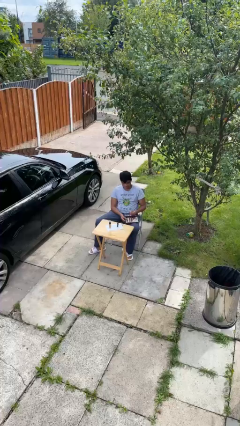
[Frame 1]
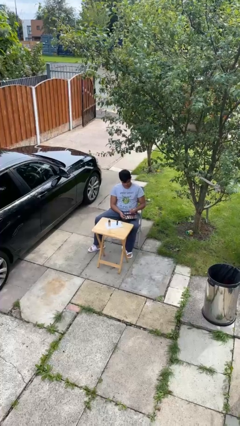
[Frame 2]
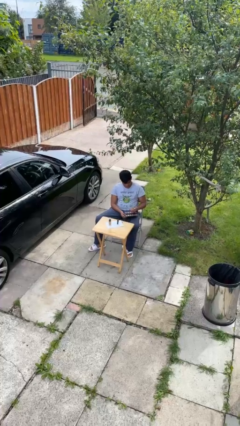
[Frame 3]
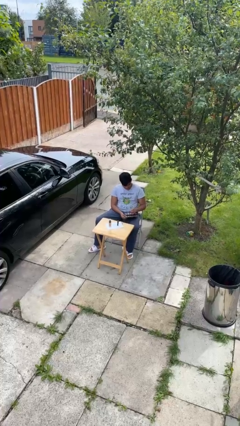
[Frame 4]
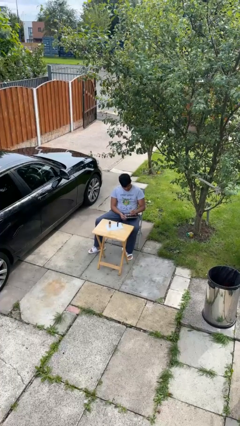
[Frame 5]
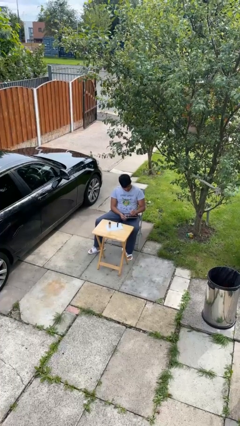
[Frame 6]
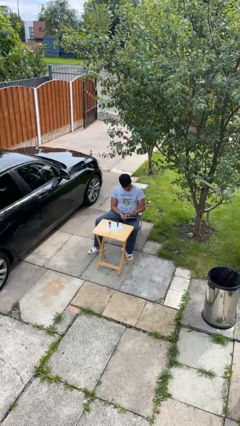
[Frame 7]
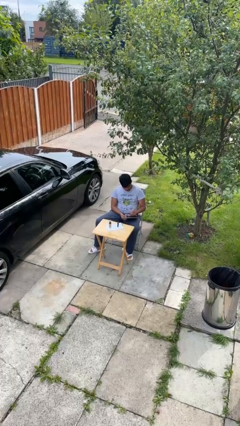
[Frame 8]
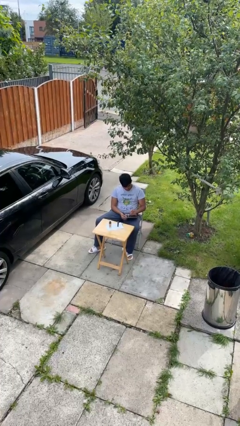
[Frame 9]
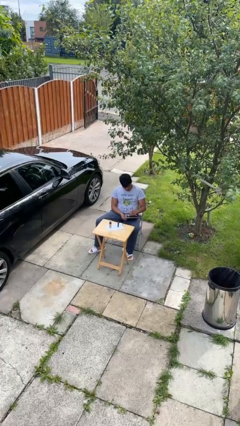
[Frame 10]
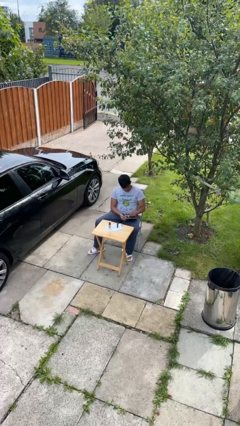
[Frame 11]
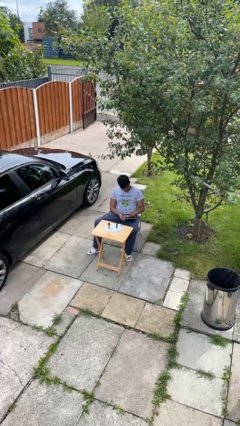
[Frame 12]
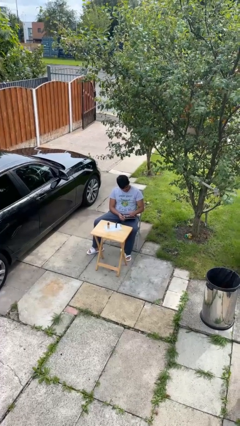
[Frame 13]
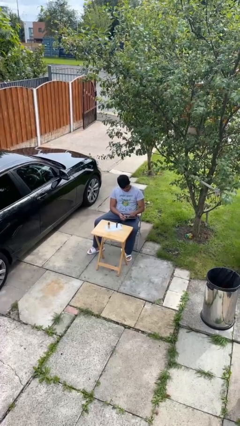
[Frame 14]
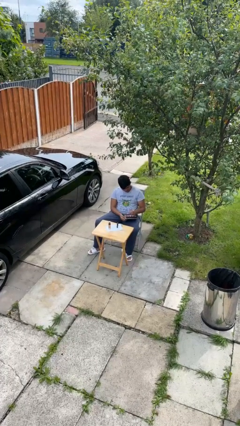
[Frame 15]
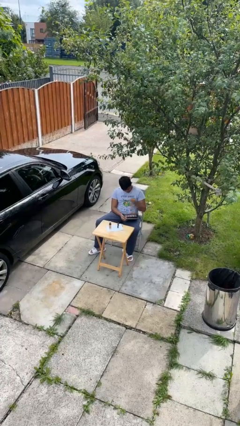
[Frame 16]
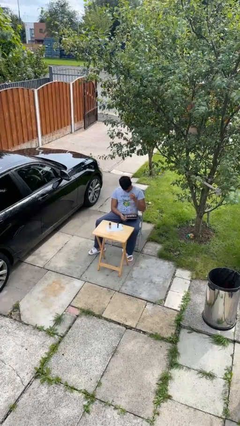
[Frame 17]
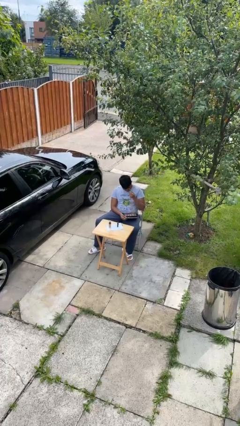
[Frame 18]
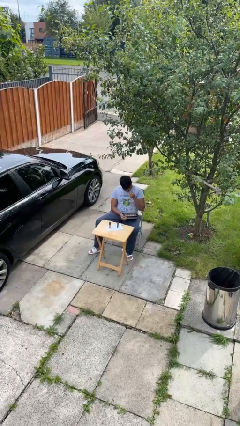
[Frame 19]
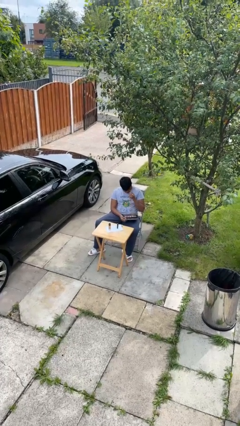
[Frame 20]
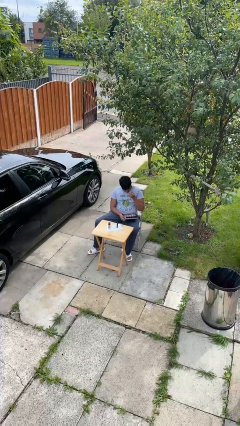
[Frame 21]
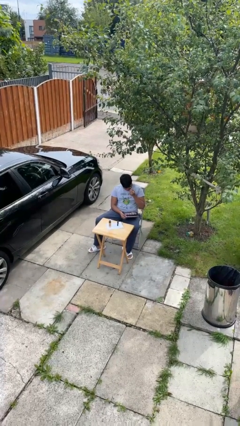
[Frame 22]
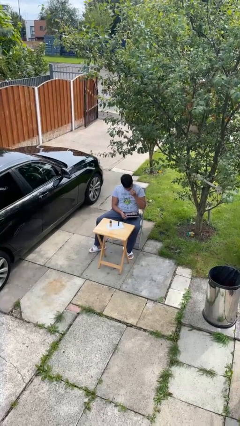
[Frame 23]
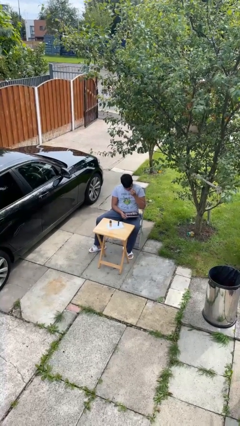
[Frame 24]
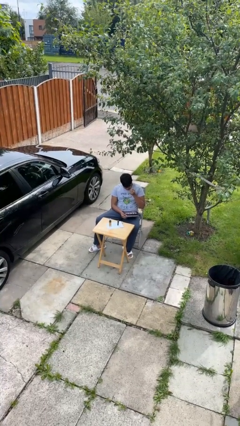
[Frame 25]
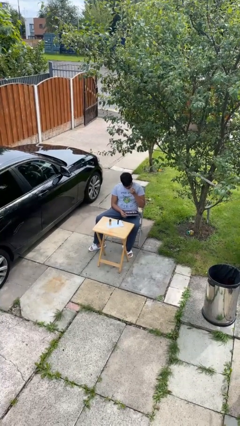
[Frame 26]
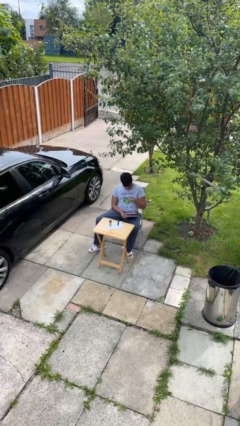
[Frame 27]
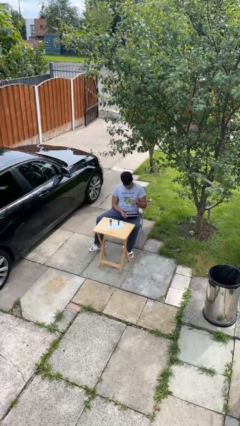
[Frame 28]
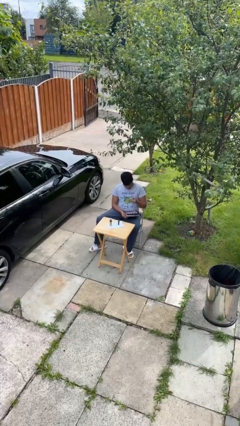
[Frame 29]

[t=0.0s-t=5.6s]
person applies eye makeup

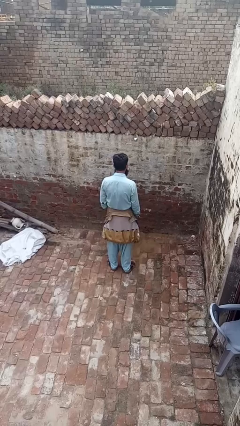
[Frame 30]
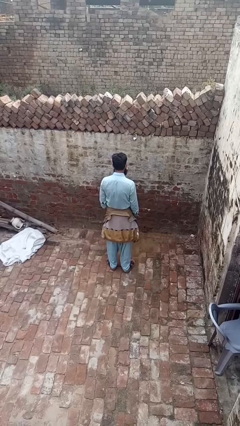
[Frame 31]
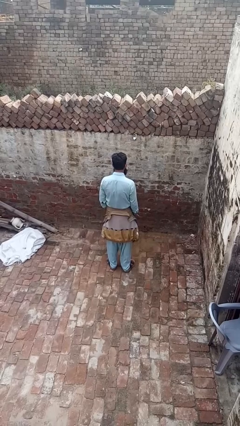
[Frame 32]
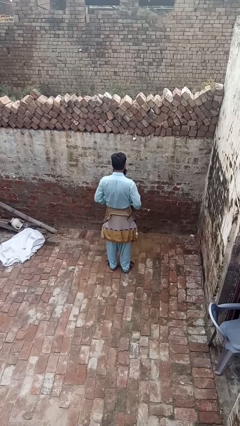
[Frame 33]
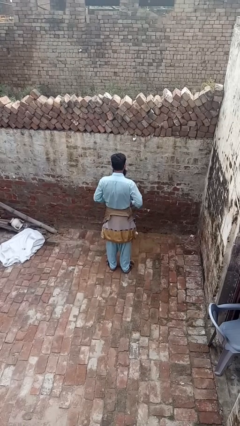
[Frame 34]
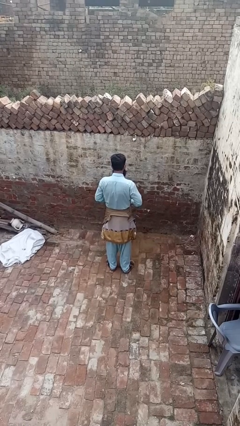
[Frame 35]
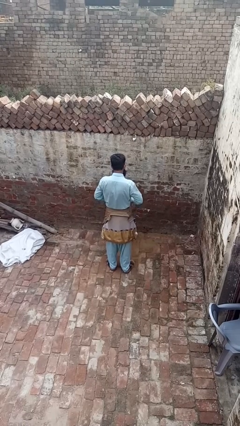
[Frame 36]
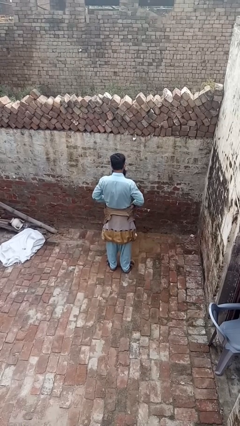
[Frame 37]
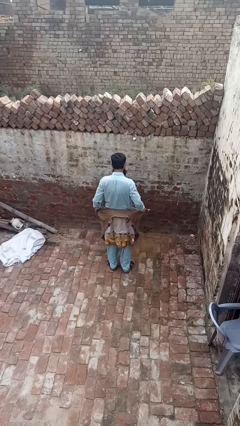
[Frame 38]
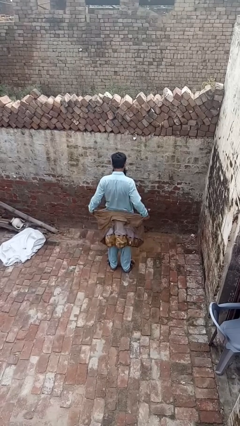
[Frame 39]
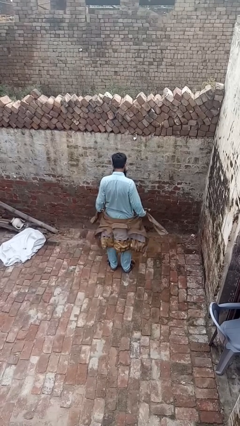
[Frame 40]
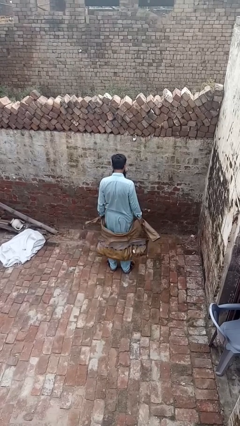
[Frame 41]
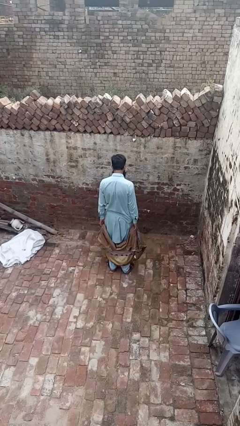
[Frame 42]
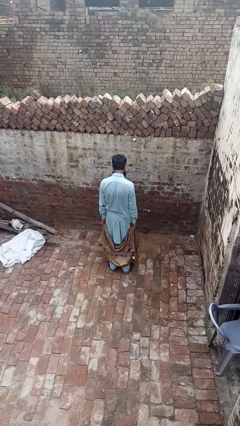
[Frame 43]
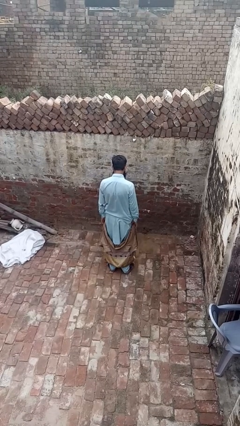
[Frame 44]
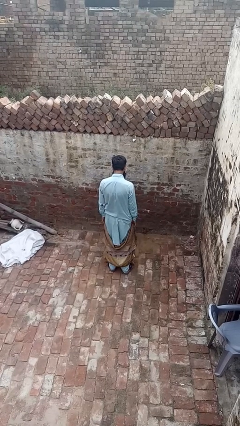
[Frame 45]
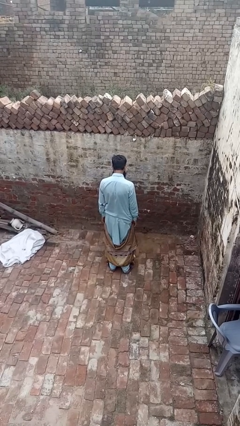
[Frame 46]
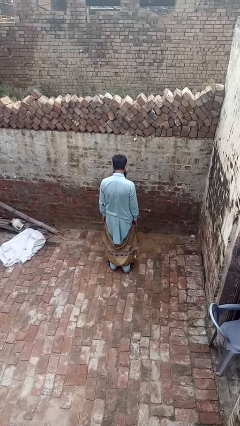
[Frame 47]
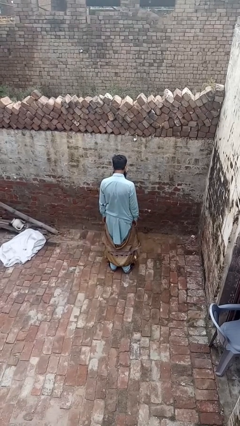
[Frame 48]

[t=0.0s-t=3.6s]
person unties jacket around waist

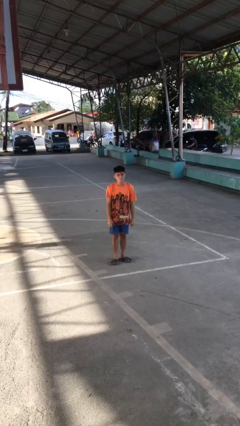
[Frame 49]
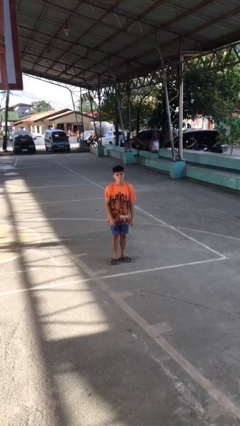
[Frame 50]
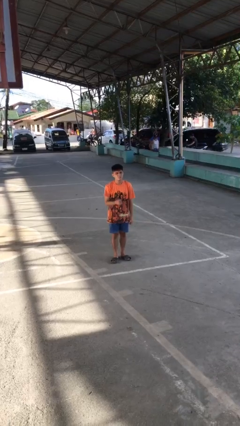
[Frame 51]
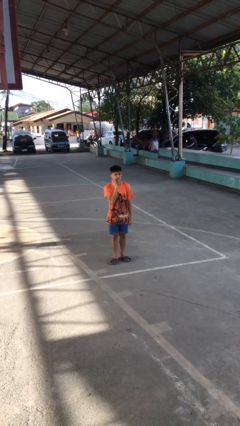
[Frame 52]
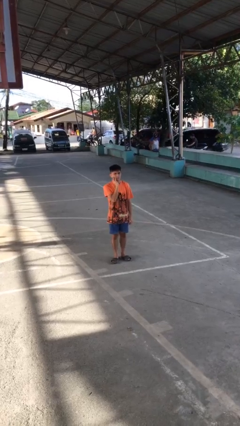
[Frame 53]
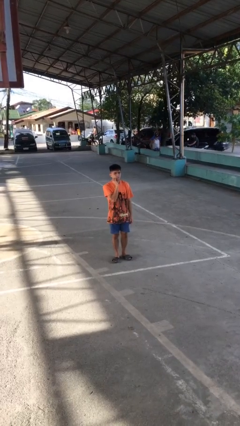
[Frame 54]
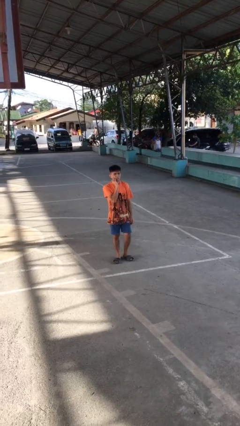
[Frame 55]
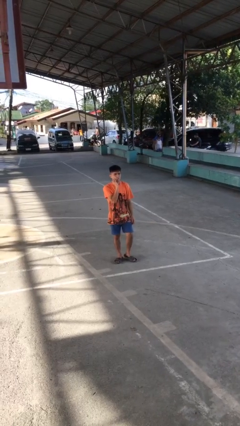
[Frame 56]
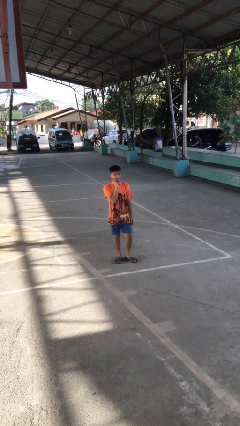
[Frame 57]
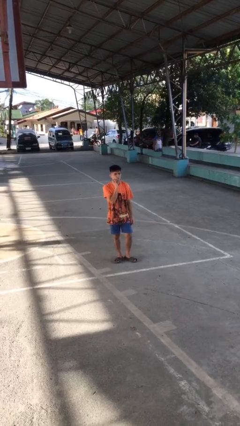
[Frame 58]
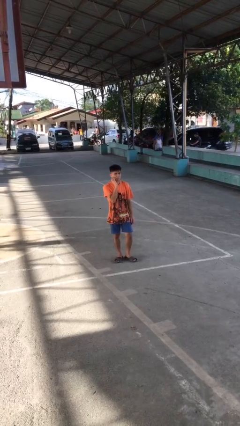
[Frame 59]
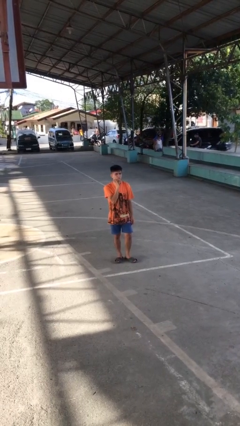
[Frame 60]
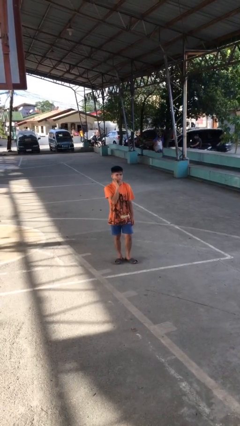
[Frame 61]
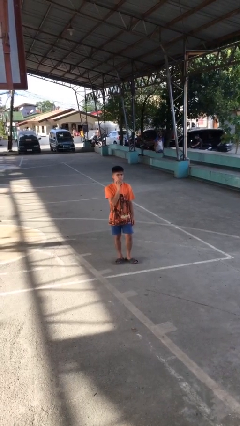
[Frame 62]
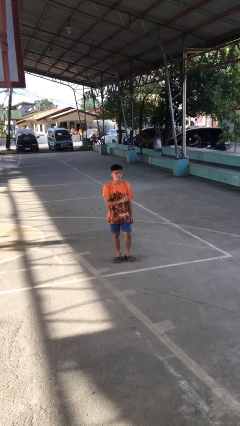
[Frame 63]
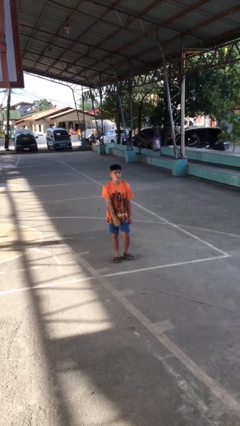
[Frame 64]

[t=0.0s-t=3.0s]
person scratches face

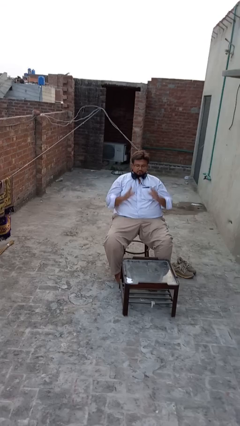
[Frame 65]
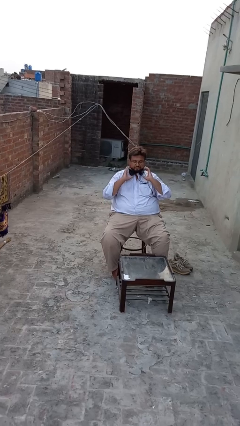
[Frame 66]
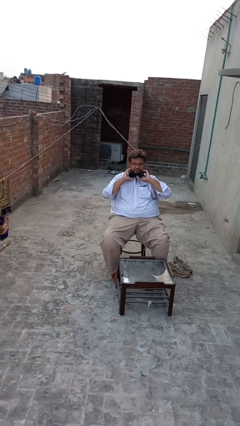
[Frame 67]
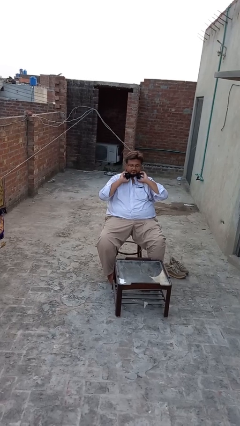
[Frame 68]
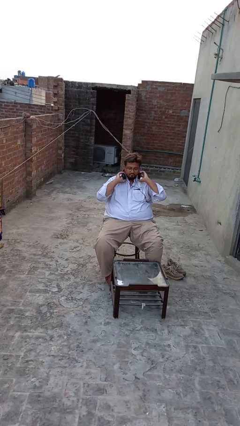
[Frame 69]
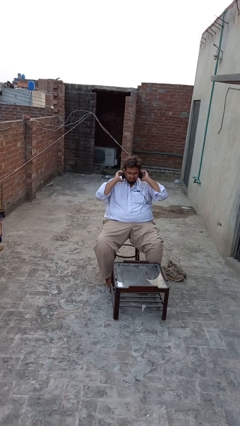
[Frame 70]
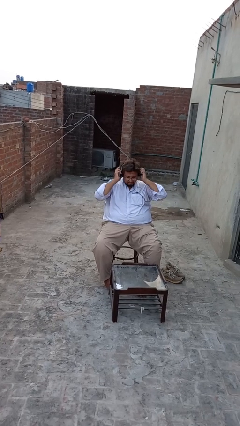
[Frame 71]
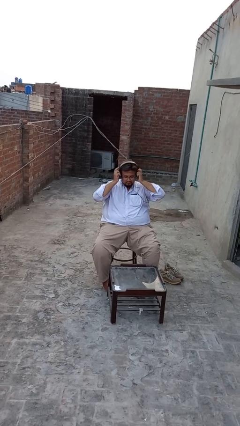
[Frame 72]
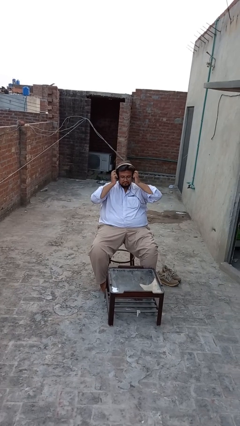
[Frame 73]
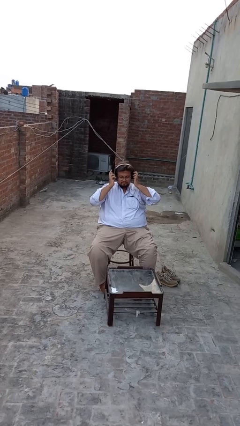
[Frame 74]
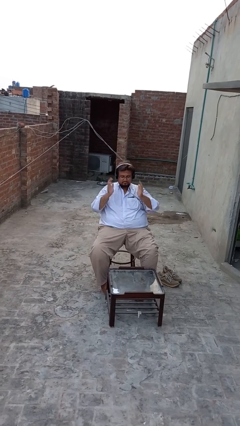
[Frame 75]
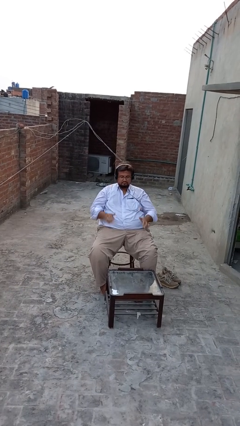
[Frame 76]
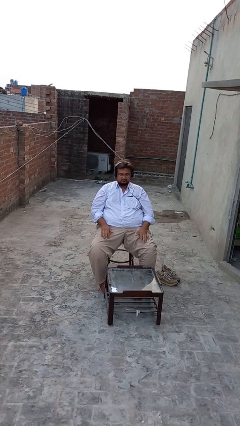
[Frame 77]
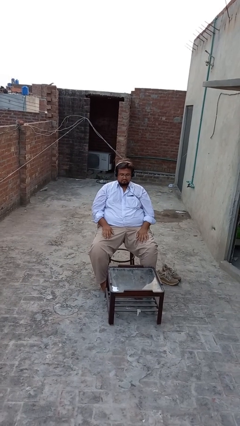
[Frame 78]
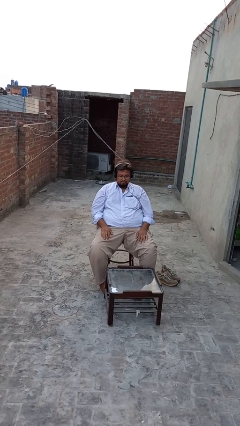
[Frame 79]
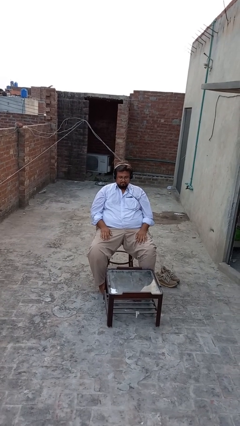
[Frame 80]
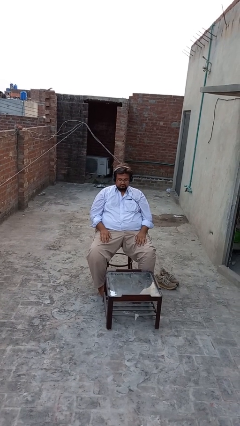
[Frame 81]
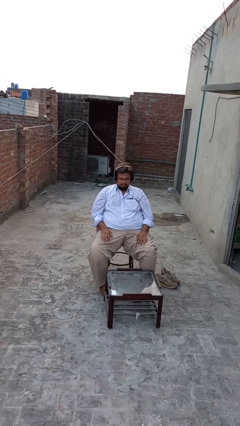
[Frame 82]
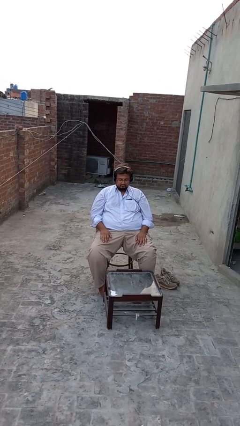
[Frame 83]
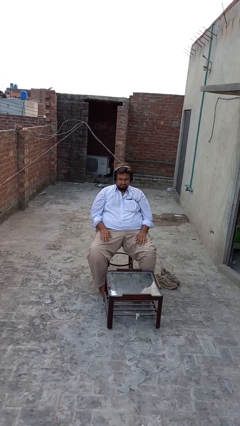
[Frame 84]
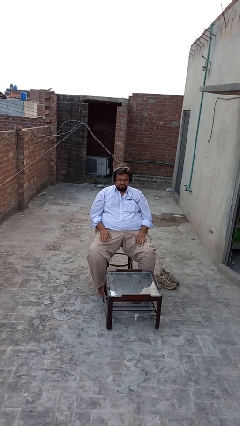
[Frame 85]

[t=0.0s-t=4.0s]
person puts on headphones

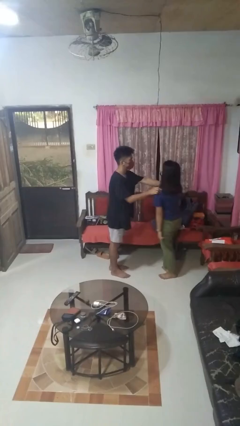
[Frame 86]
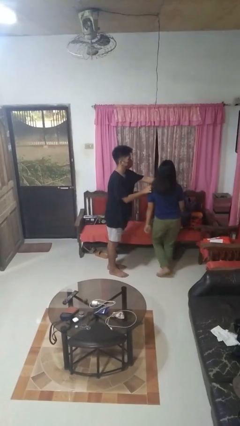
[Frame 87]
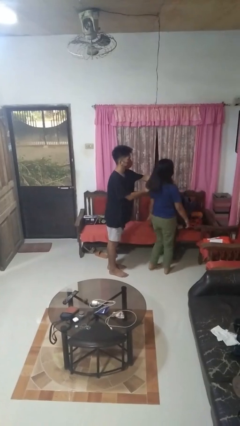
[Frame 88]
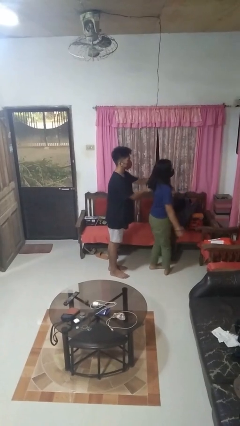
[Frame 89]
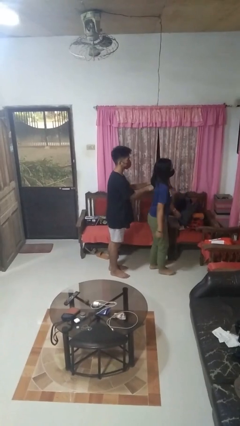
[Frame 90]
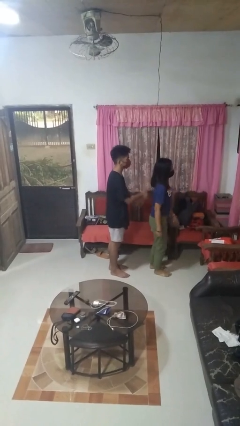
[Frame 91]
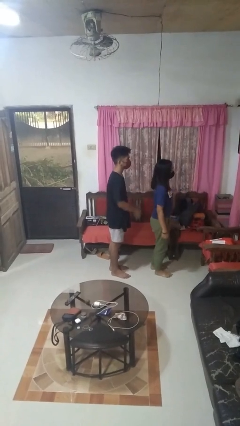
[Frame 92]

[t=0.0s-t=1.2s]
person spins person around

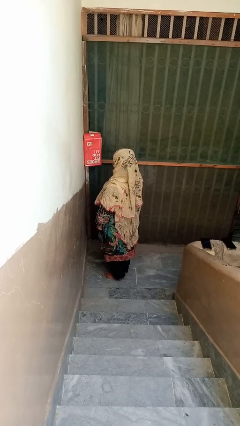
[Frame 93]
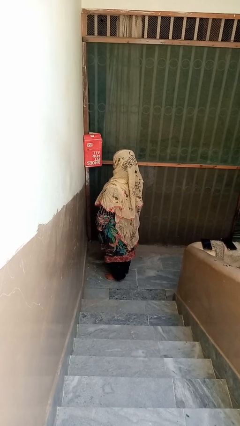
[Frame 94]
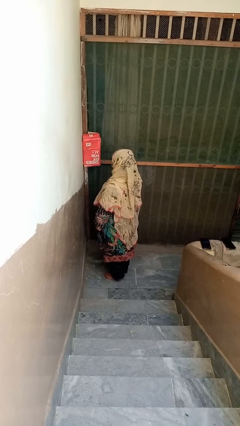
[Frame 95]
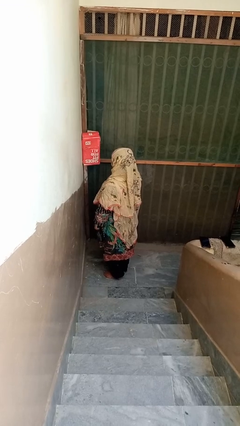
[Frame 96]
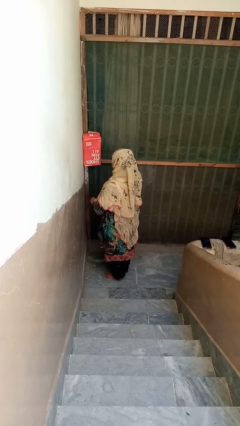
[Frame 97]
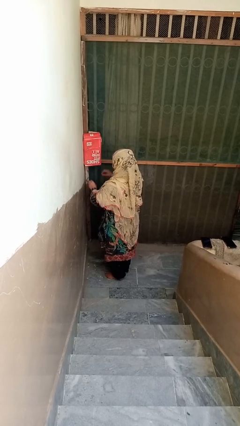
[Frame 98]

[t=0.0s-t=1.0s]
person opens mailbox
